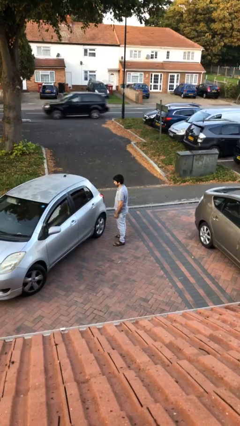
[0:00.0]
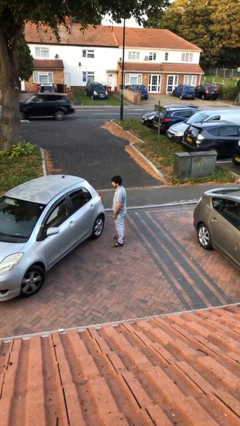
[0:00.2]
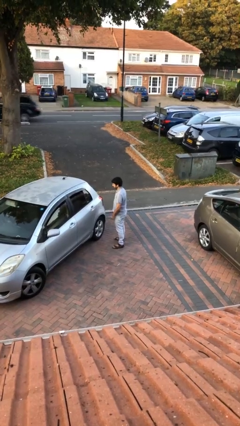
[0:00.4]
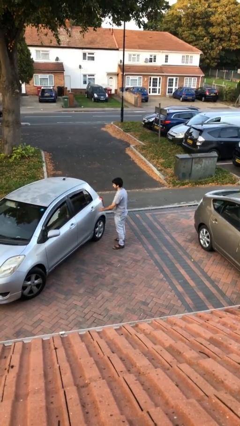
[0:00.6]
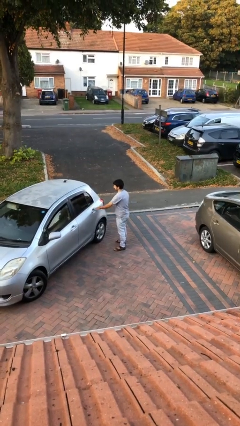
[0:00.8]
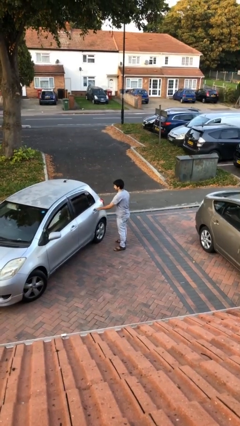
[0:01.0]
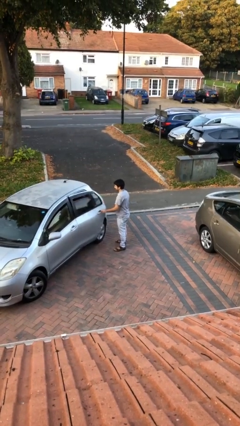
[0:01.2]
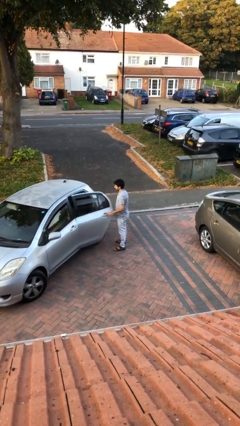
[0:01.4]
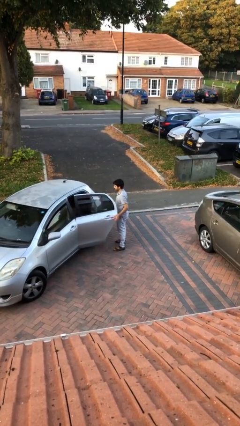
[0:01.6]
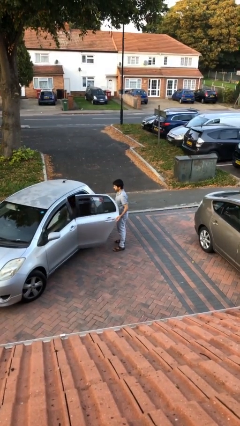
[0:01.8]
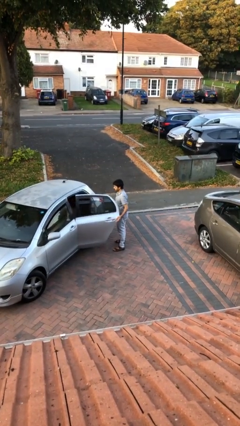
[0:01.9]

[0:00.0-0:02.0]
person opens car door

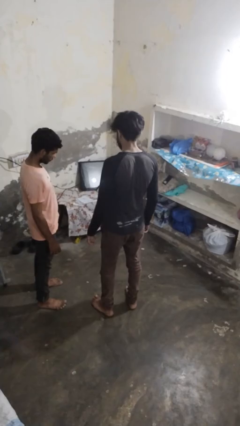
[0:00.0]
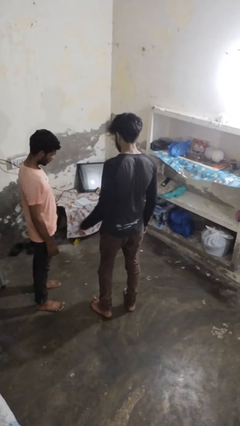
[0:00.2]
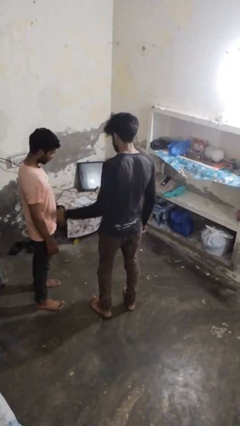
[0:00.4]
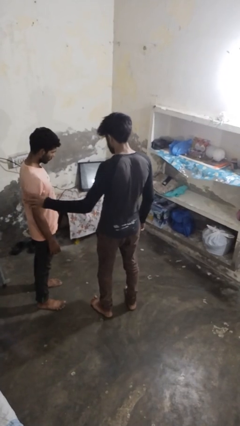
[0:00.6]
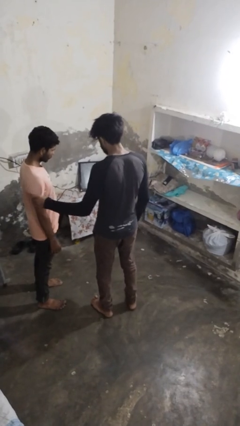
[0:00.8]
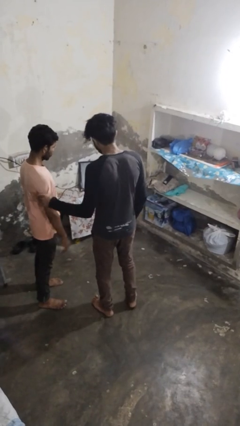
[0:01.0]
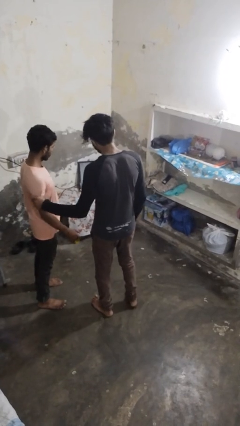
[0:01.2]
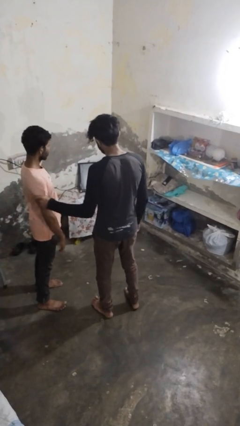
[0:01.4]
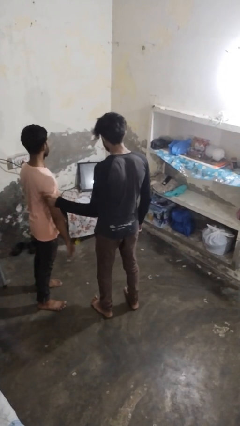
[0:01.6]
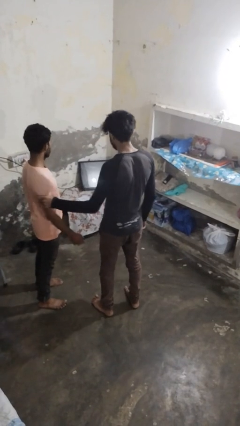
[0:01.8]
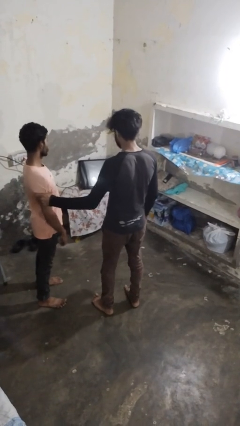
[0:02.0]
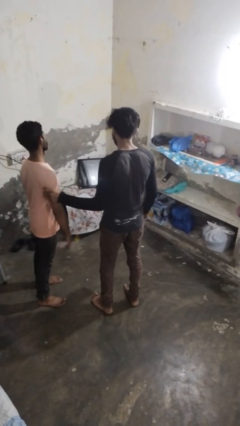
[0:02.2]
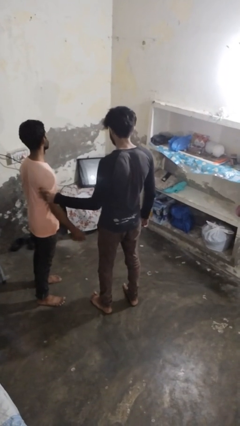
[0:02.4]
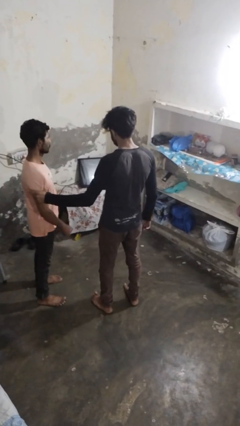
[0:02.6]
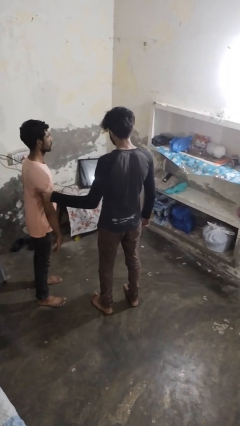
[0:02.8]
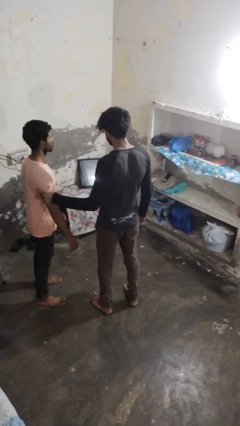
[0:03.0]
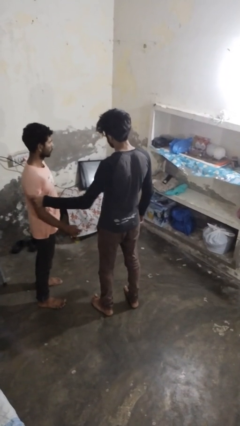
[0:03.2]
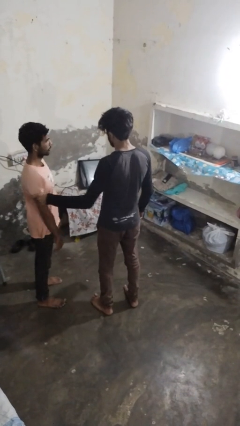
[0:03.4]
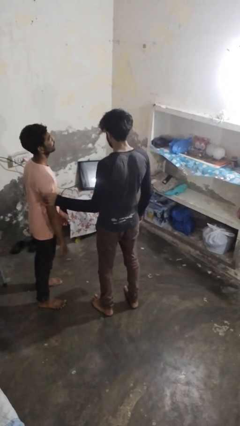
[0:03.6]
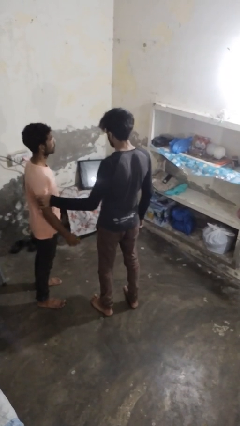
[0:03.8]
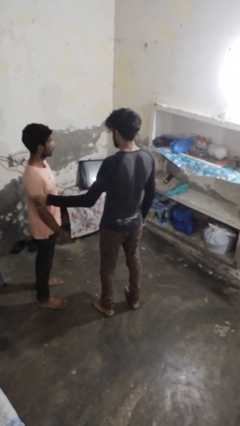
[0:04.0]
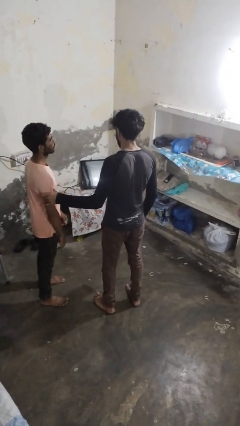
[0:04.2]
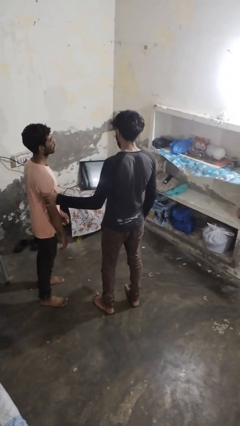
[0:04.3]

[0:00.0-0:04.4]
person grabs person by bicep

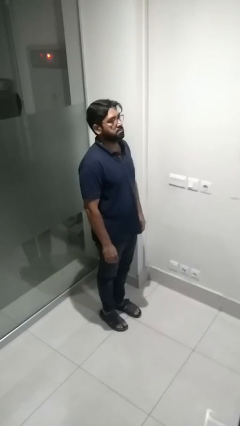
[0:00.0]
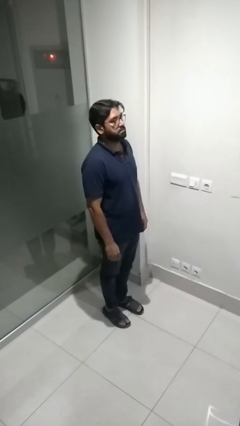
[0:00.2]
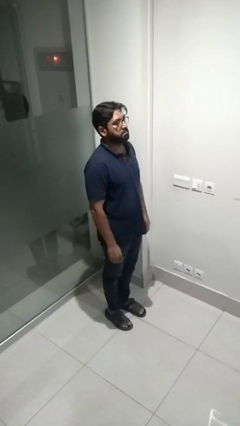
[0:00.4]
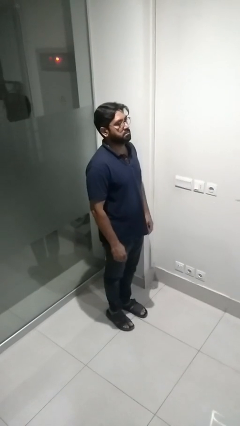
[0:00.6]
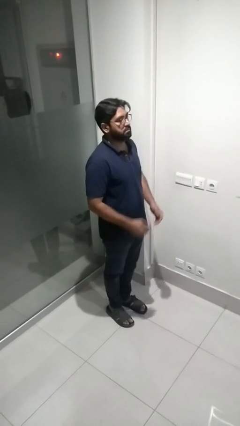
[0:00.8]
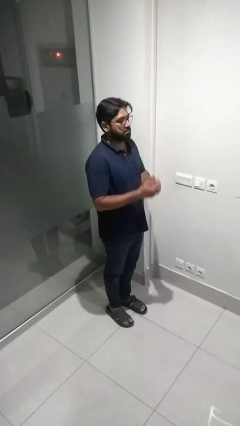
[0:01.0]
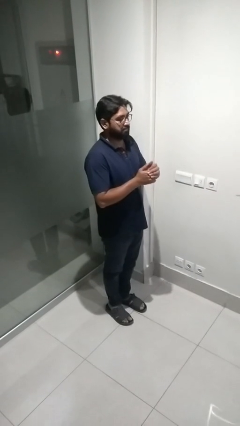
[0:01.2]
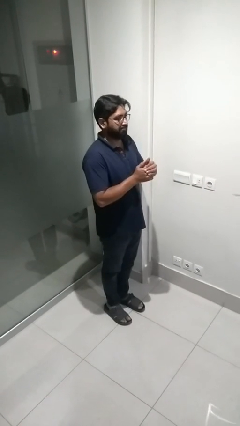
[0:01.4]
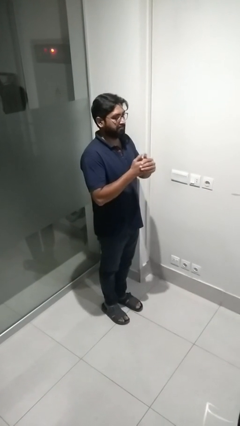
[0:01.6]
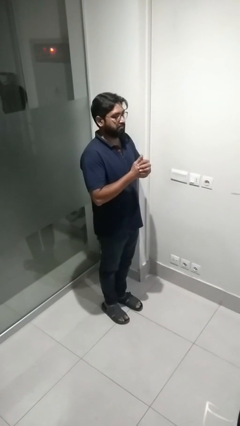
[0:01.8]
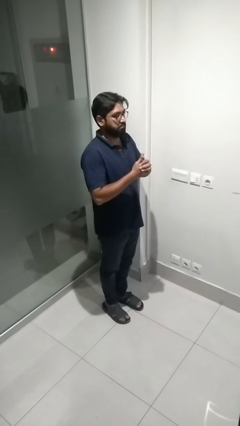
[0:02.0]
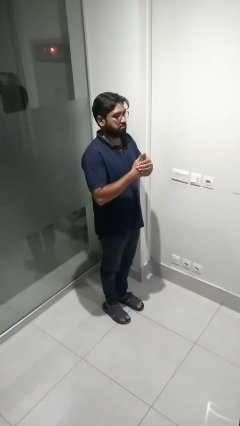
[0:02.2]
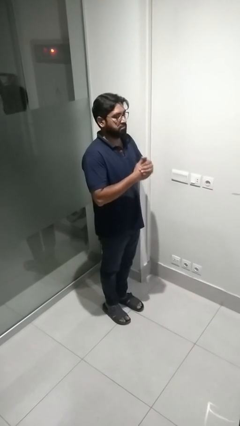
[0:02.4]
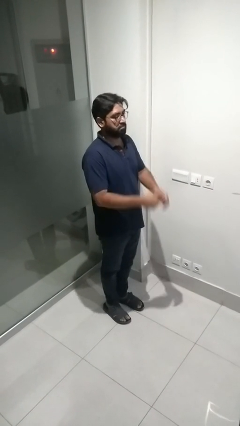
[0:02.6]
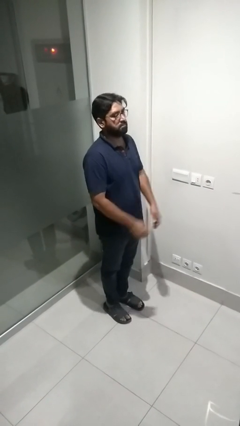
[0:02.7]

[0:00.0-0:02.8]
person cracks knuckles

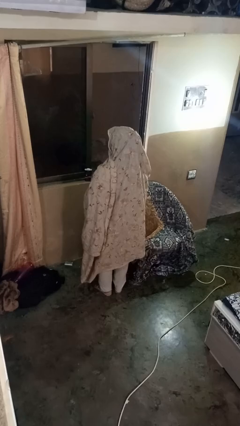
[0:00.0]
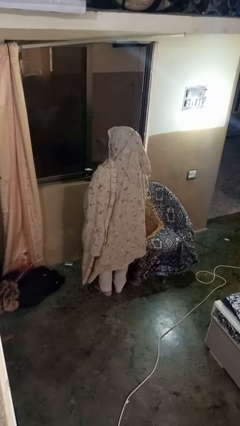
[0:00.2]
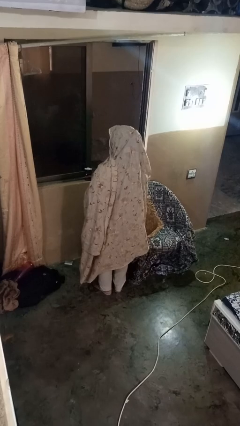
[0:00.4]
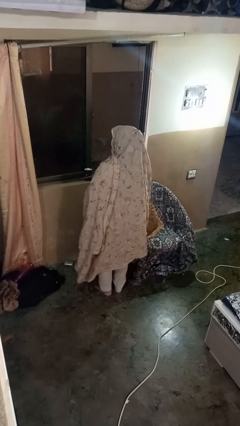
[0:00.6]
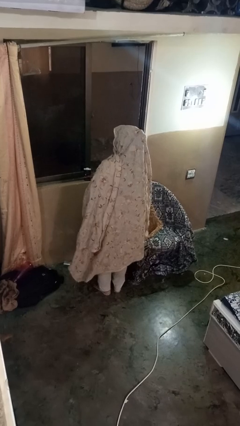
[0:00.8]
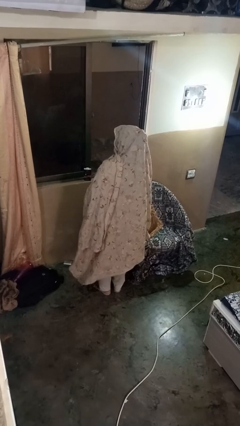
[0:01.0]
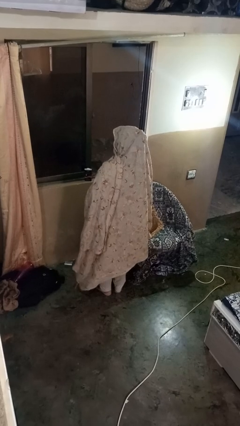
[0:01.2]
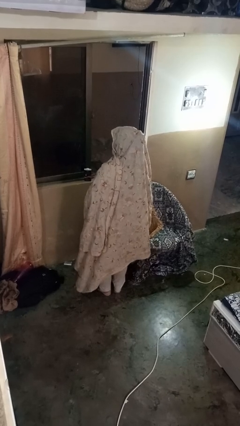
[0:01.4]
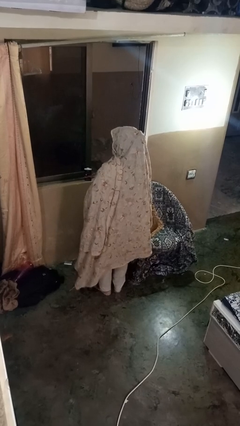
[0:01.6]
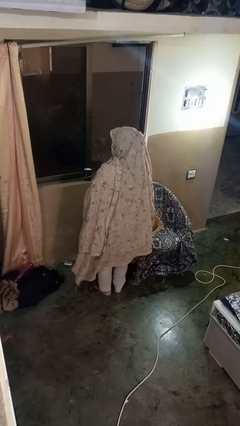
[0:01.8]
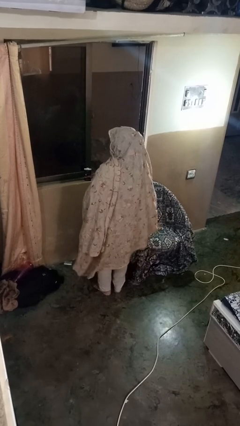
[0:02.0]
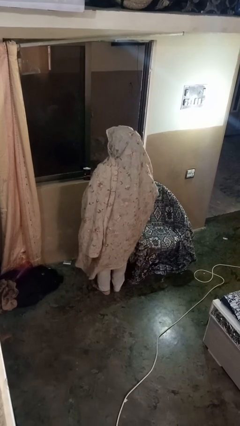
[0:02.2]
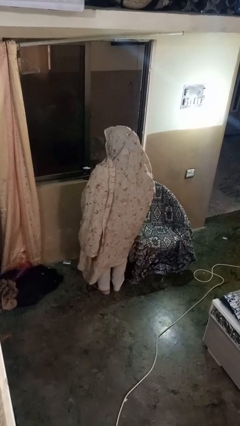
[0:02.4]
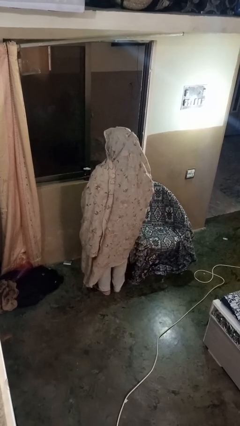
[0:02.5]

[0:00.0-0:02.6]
person picks up object from couch

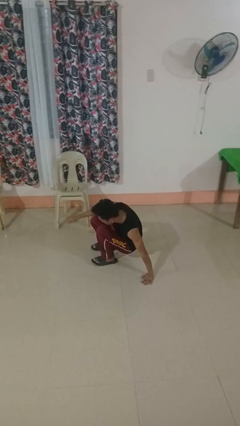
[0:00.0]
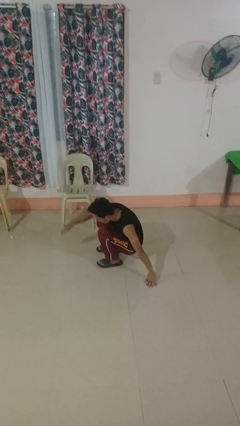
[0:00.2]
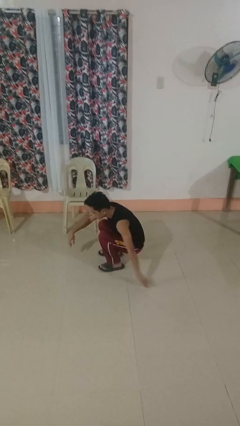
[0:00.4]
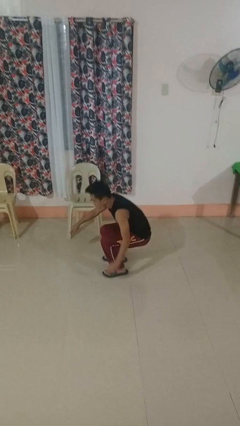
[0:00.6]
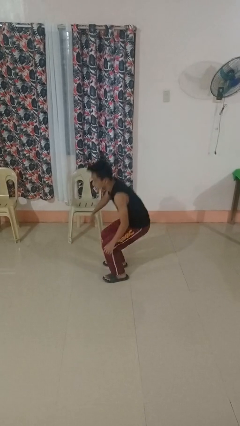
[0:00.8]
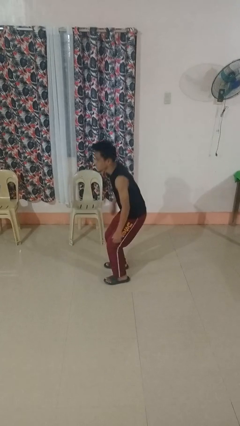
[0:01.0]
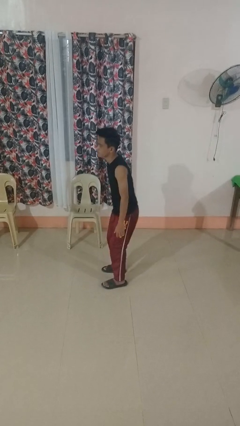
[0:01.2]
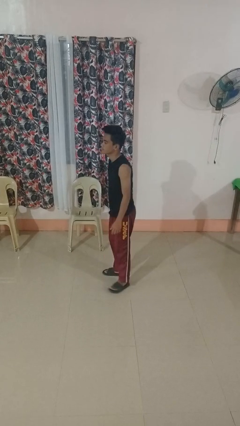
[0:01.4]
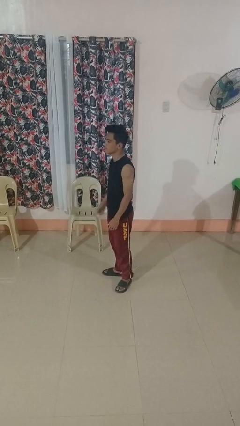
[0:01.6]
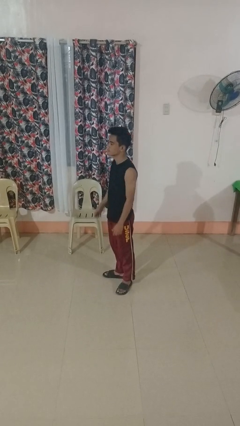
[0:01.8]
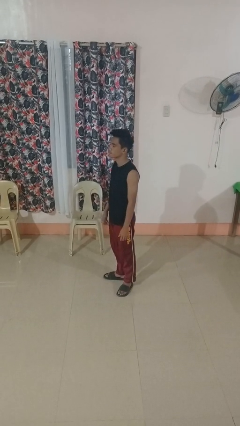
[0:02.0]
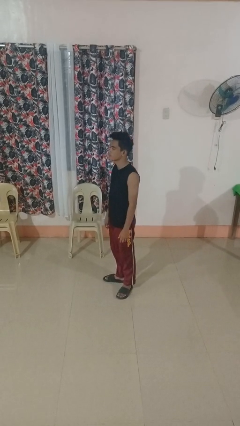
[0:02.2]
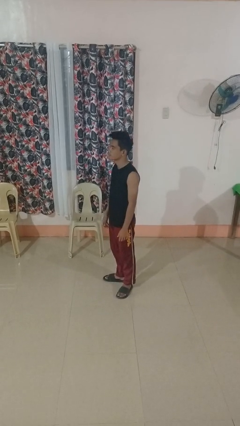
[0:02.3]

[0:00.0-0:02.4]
person stands up from floor

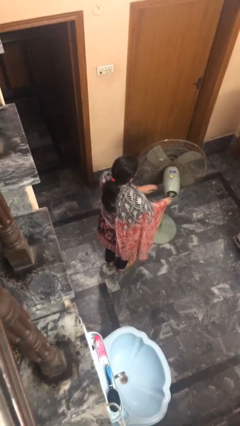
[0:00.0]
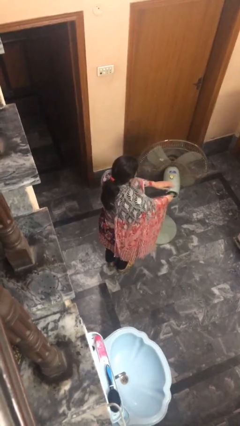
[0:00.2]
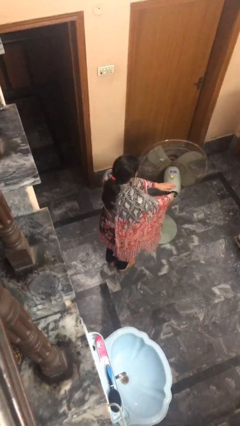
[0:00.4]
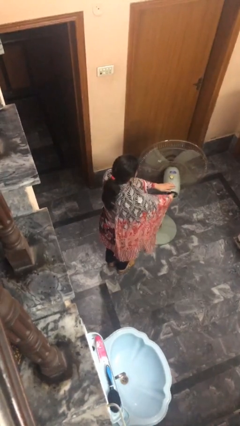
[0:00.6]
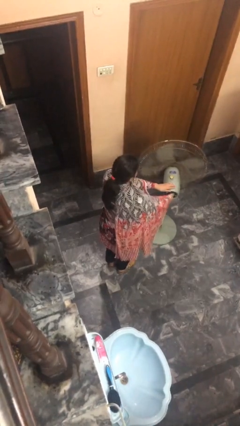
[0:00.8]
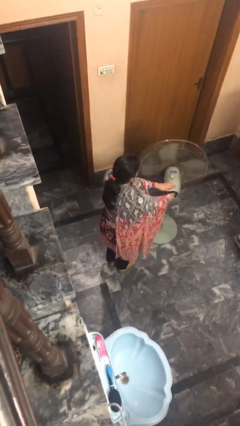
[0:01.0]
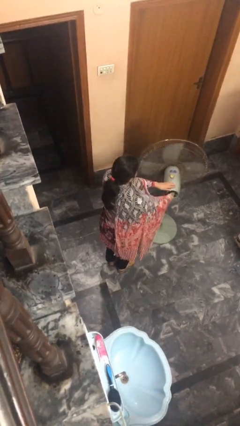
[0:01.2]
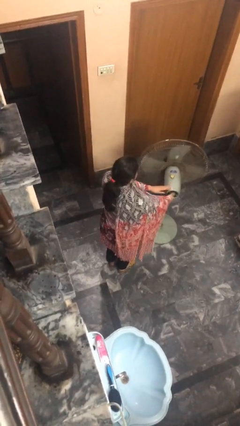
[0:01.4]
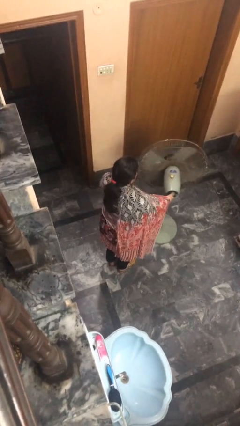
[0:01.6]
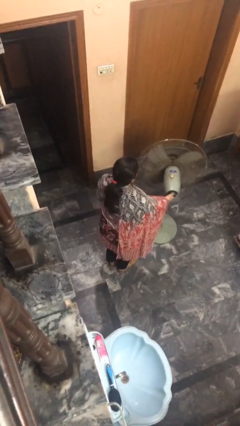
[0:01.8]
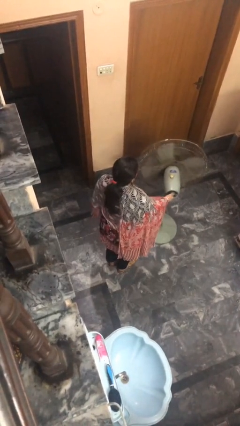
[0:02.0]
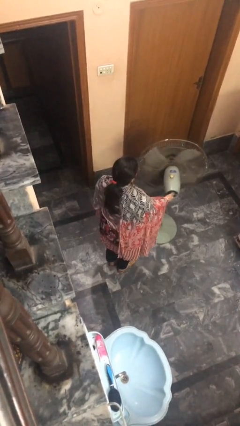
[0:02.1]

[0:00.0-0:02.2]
person turns on fan

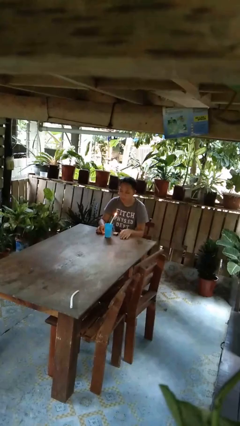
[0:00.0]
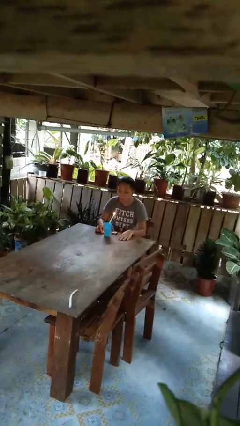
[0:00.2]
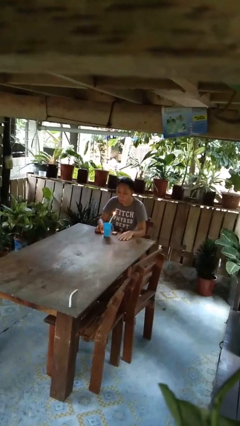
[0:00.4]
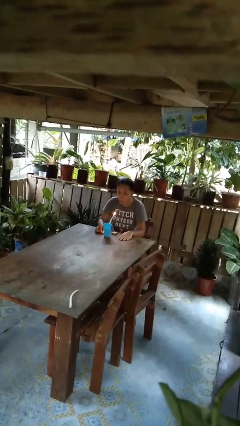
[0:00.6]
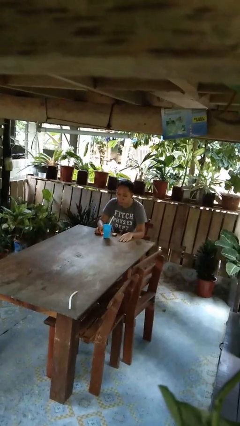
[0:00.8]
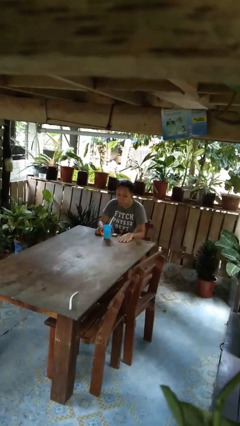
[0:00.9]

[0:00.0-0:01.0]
person extinguishes candle
